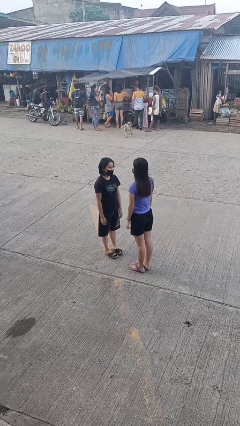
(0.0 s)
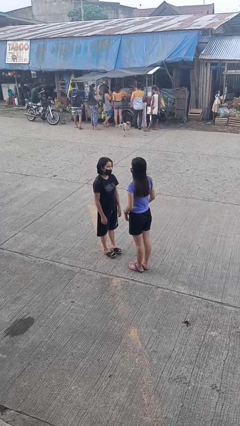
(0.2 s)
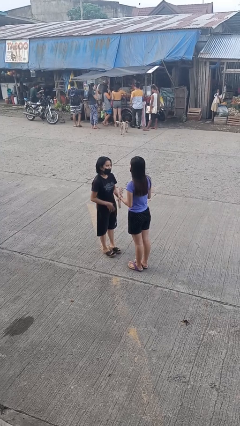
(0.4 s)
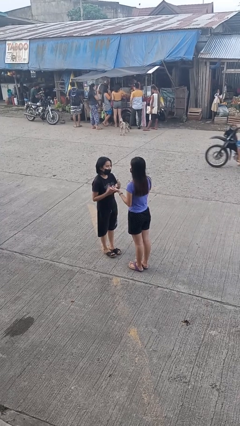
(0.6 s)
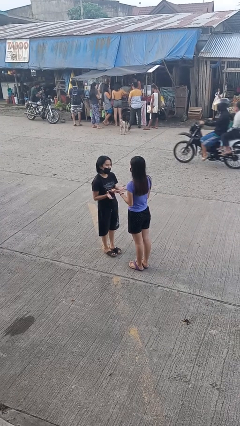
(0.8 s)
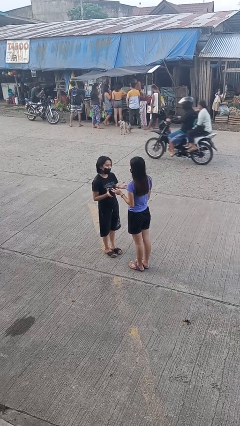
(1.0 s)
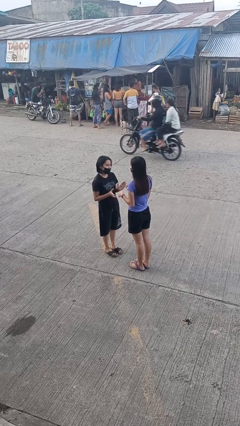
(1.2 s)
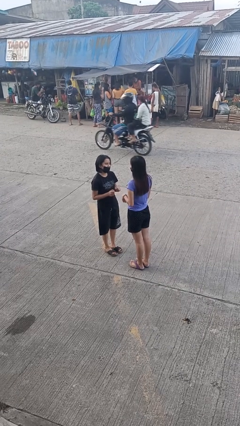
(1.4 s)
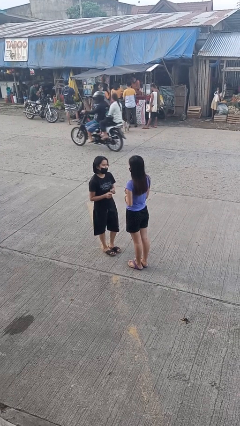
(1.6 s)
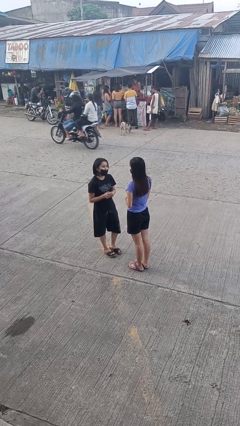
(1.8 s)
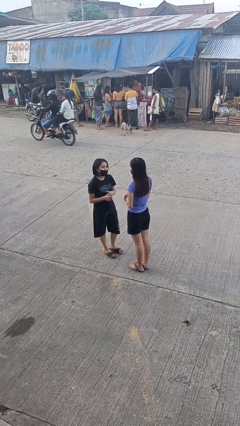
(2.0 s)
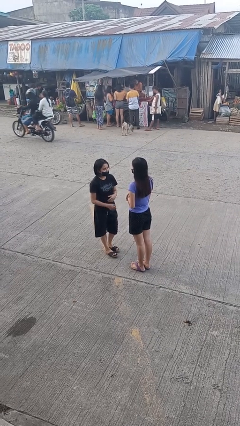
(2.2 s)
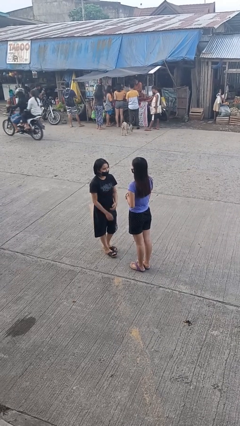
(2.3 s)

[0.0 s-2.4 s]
person talks to person

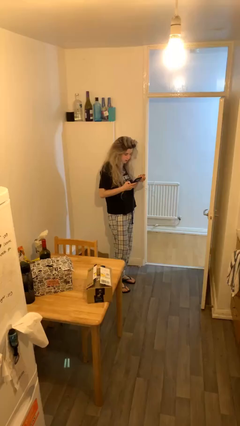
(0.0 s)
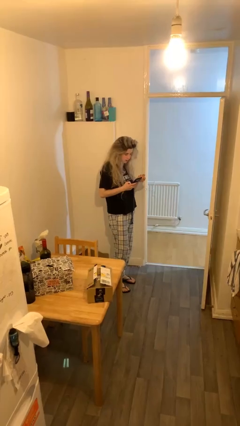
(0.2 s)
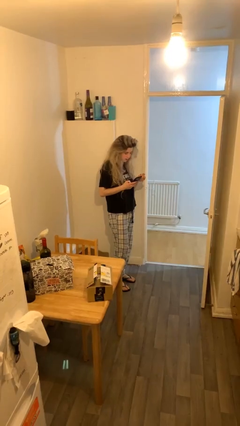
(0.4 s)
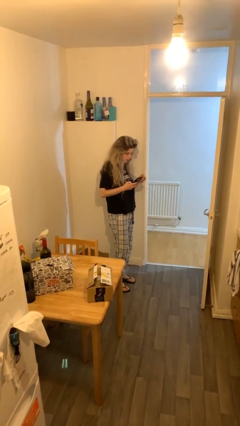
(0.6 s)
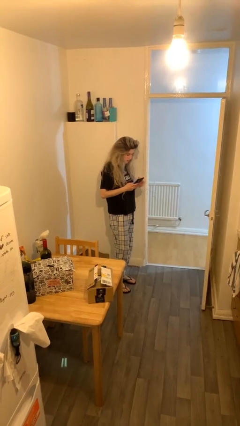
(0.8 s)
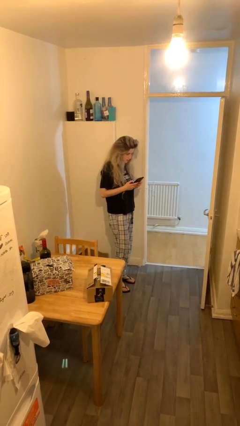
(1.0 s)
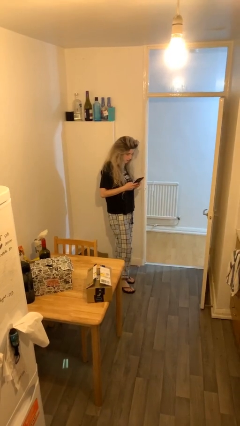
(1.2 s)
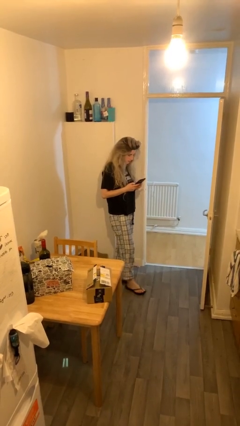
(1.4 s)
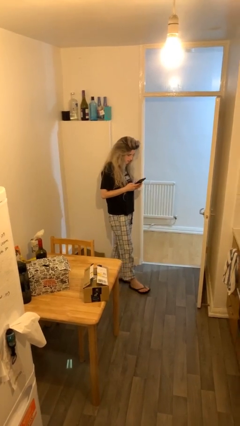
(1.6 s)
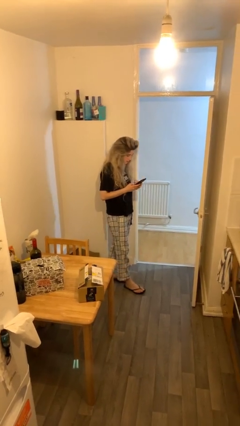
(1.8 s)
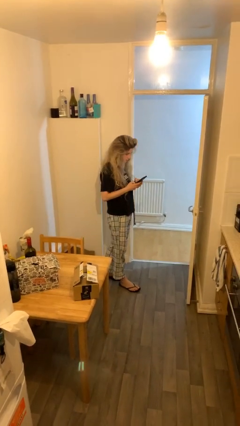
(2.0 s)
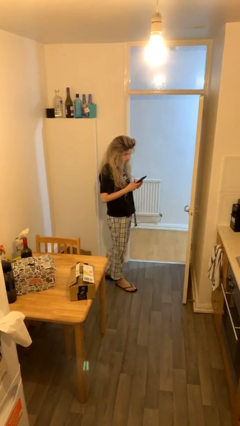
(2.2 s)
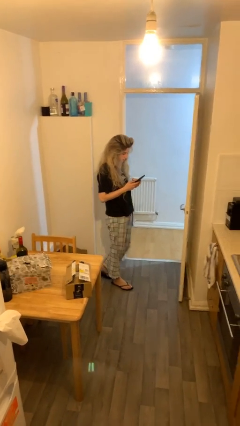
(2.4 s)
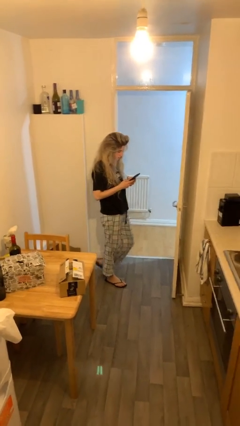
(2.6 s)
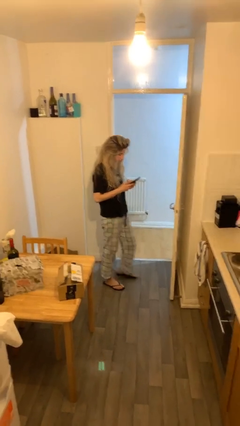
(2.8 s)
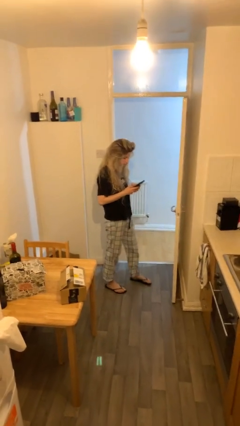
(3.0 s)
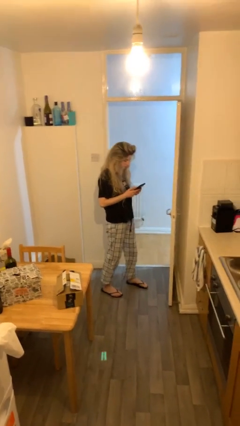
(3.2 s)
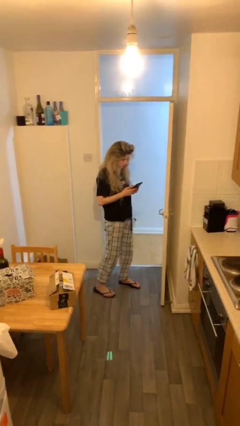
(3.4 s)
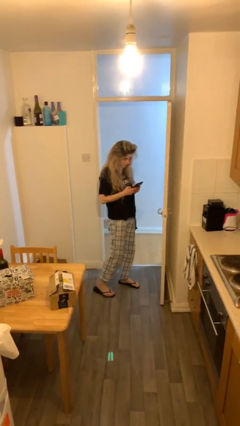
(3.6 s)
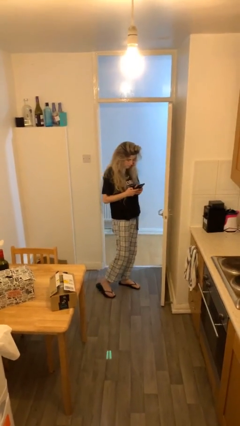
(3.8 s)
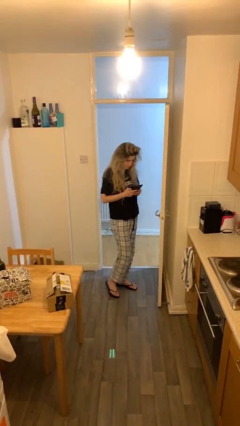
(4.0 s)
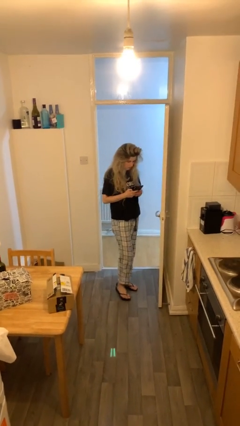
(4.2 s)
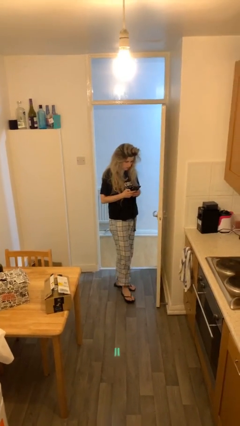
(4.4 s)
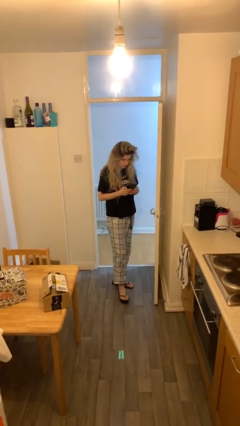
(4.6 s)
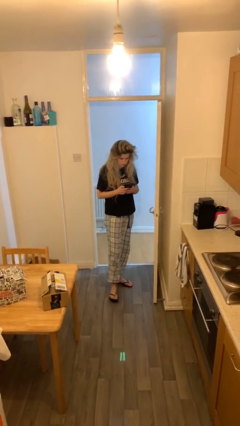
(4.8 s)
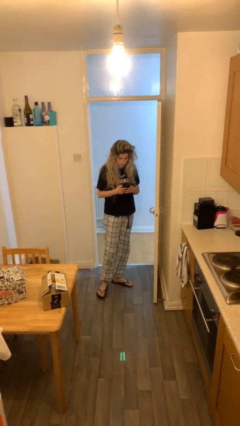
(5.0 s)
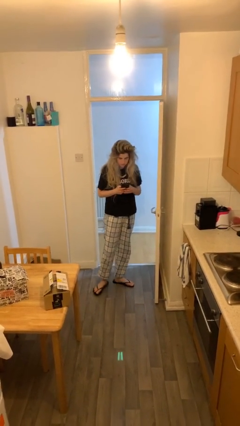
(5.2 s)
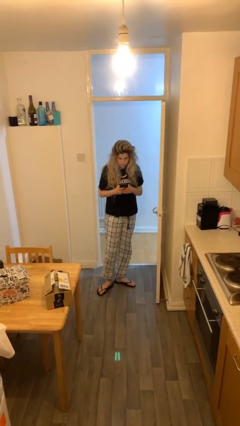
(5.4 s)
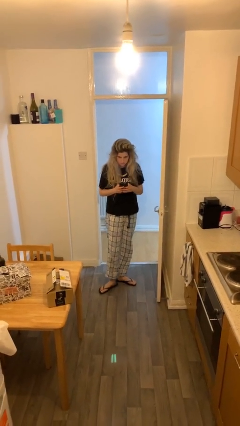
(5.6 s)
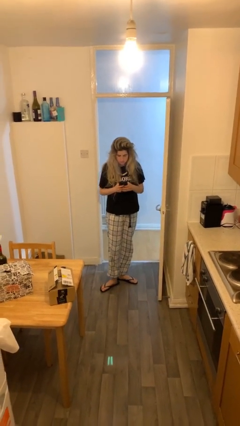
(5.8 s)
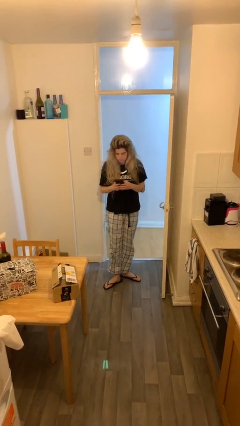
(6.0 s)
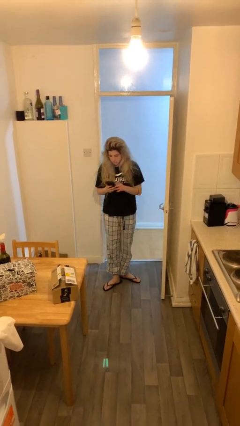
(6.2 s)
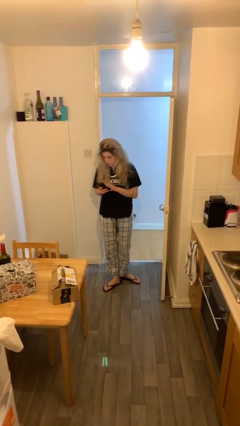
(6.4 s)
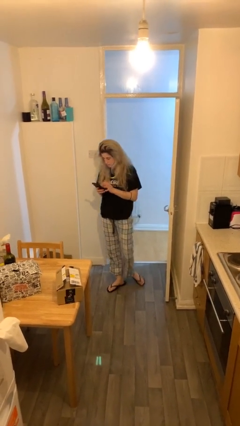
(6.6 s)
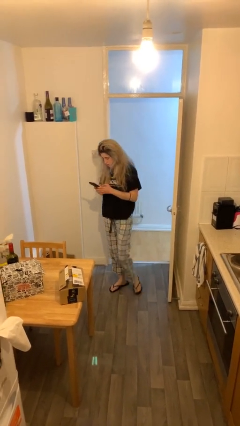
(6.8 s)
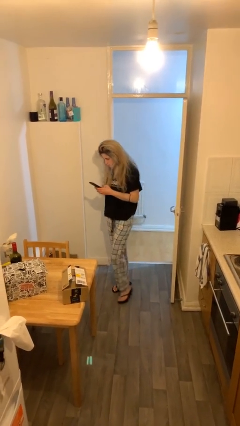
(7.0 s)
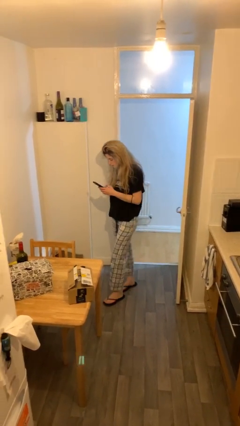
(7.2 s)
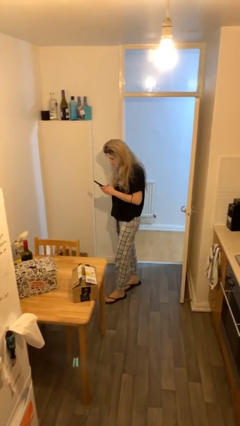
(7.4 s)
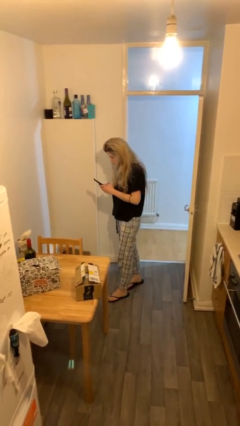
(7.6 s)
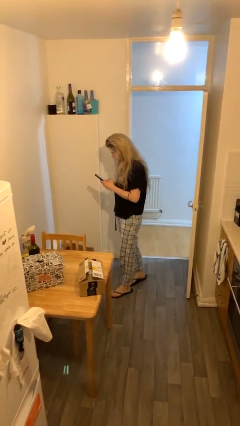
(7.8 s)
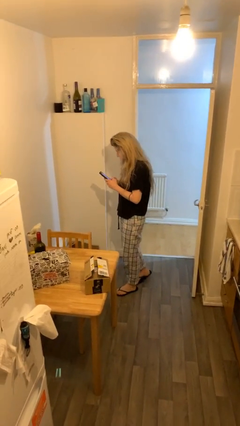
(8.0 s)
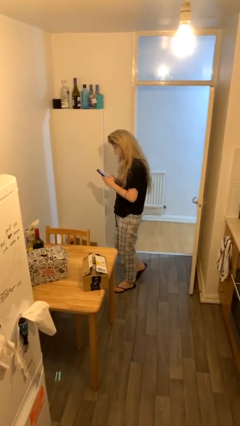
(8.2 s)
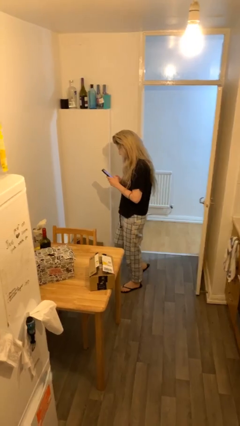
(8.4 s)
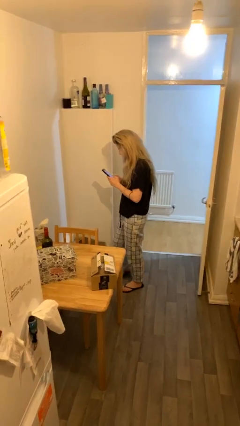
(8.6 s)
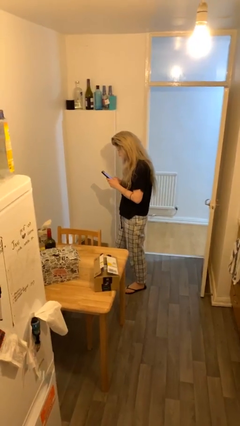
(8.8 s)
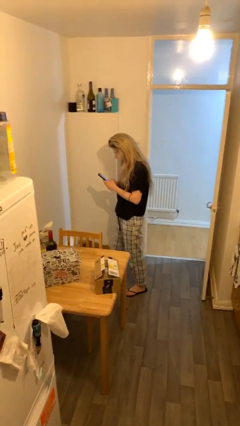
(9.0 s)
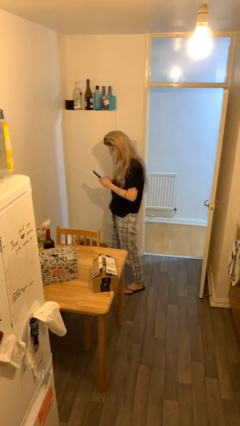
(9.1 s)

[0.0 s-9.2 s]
person texts on phone

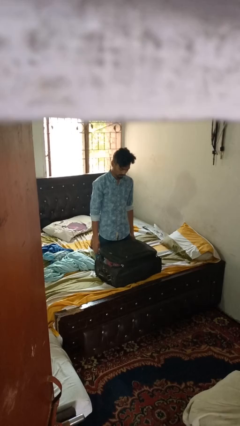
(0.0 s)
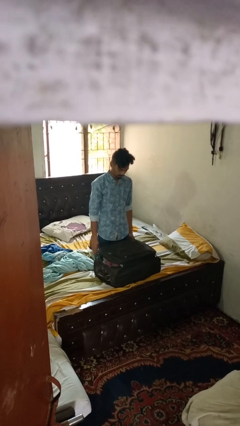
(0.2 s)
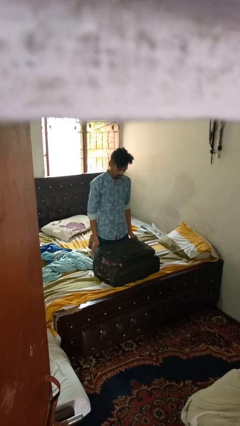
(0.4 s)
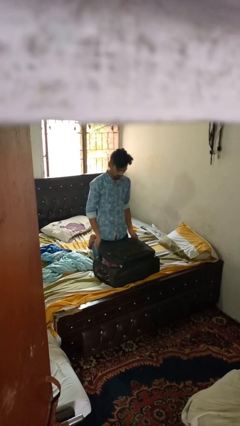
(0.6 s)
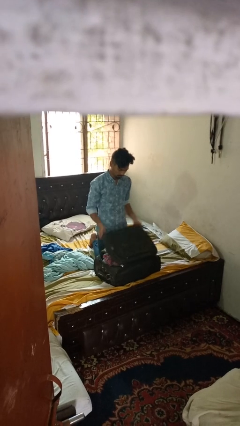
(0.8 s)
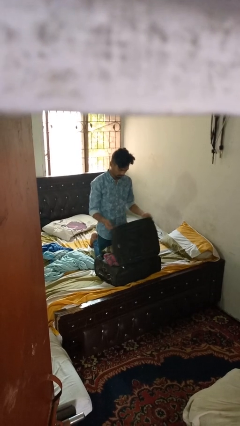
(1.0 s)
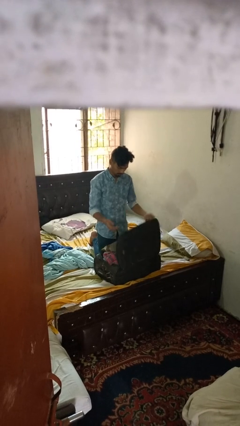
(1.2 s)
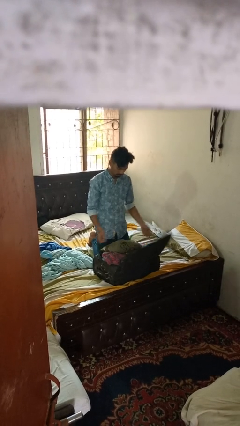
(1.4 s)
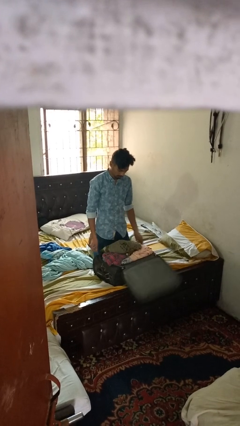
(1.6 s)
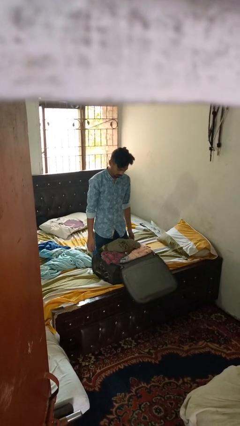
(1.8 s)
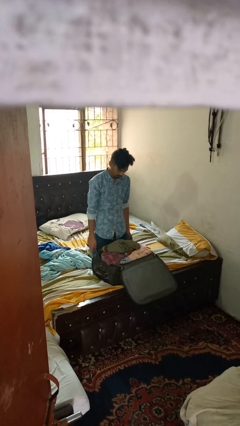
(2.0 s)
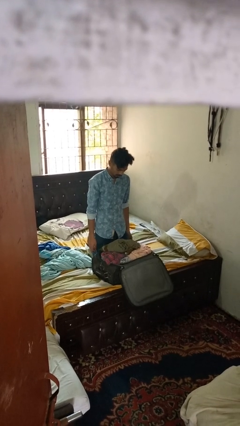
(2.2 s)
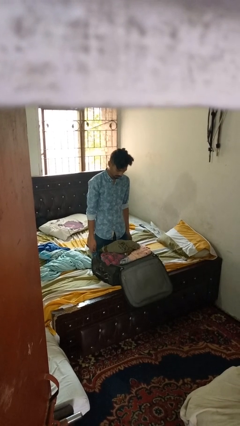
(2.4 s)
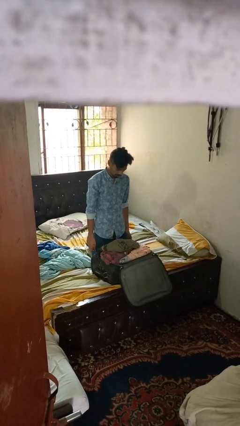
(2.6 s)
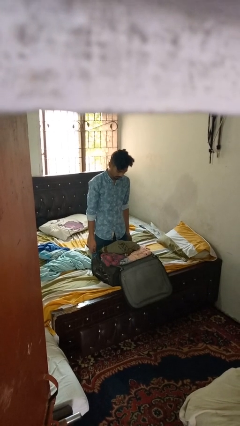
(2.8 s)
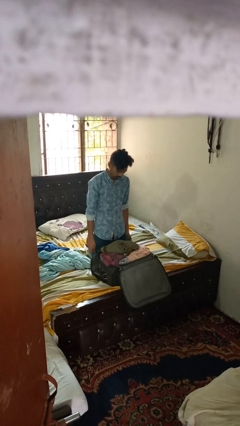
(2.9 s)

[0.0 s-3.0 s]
person opens suitcase

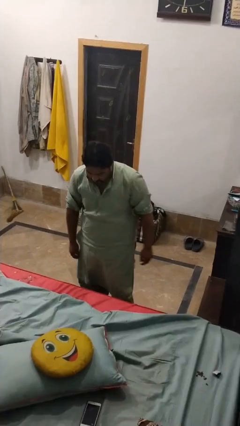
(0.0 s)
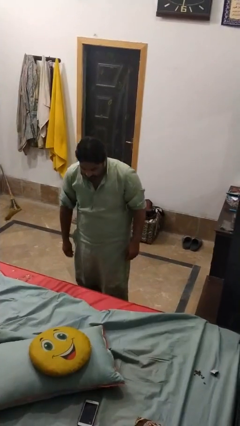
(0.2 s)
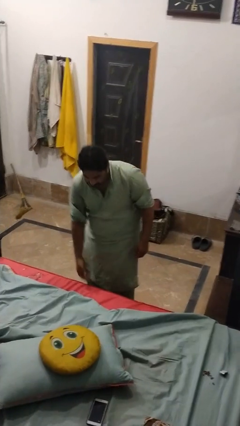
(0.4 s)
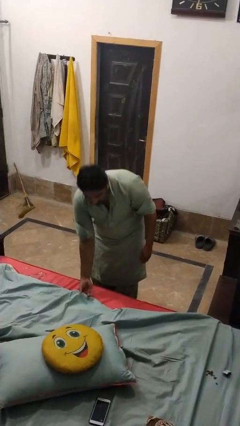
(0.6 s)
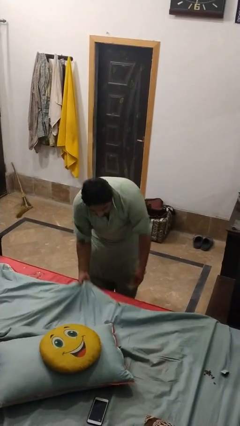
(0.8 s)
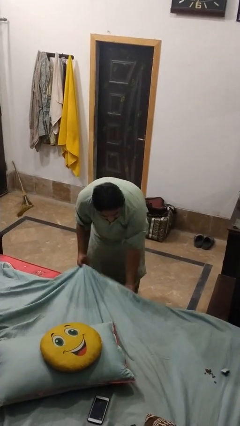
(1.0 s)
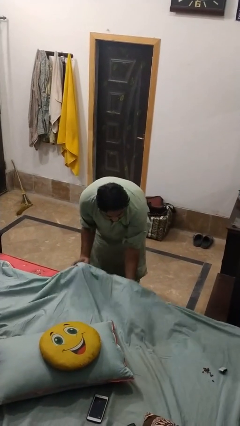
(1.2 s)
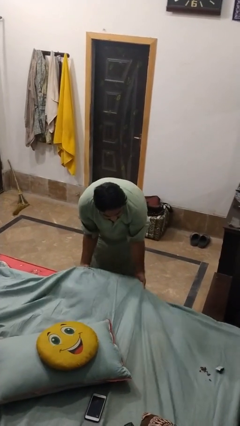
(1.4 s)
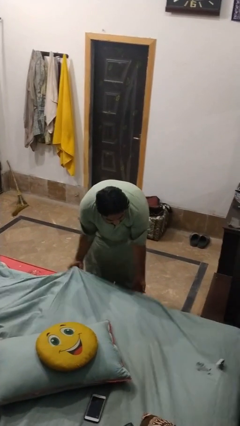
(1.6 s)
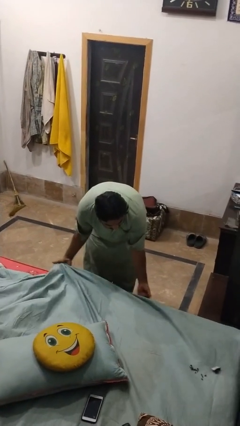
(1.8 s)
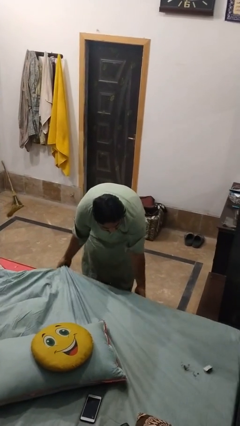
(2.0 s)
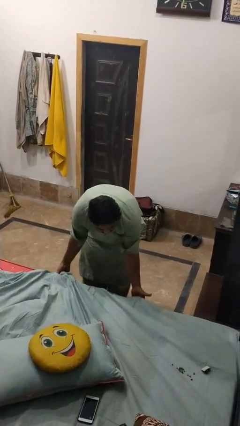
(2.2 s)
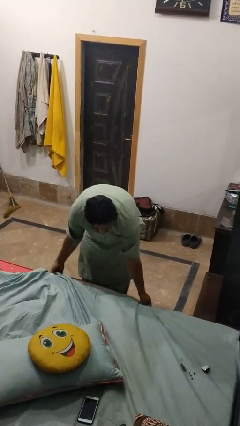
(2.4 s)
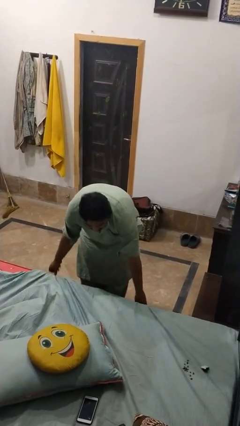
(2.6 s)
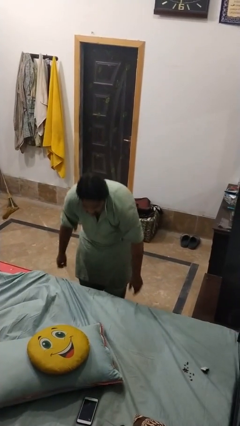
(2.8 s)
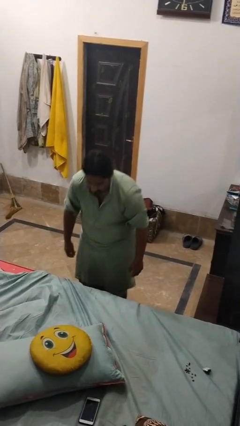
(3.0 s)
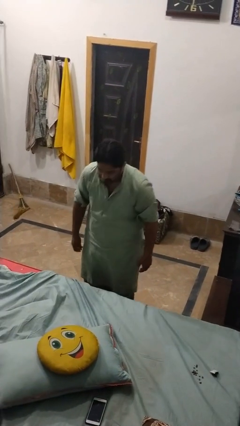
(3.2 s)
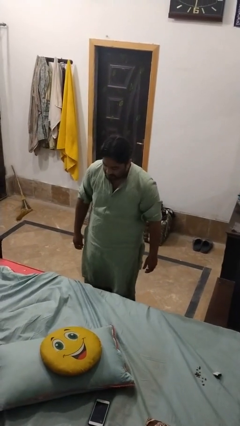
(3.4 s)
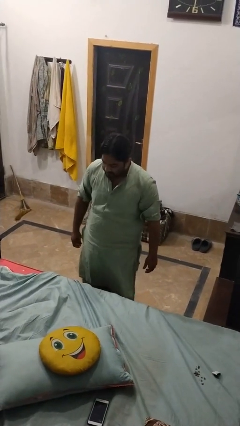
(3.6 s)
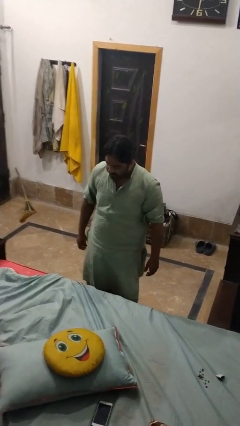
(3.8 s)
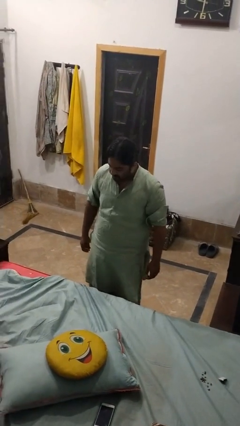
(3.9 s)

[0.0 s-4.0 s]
person makes bed
